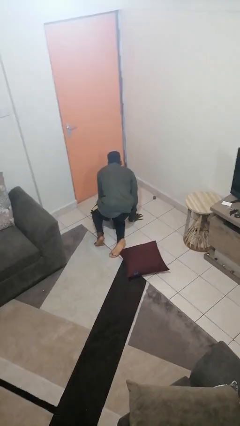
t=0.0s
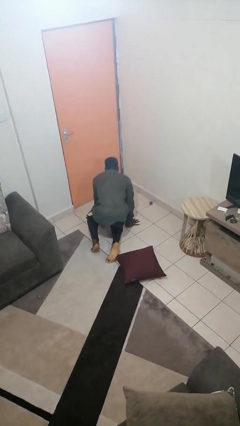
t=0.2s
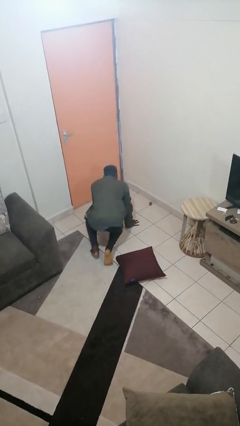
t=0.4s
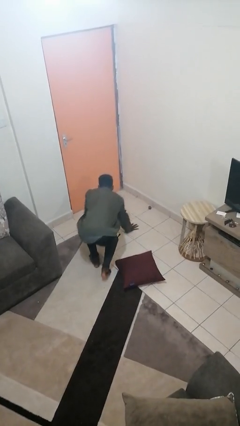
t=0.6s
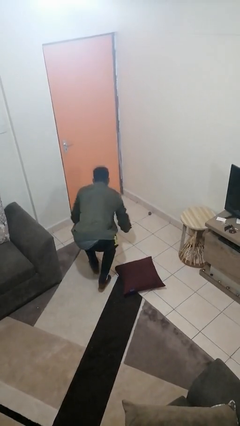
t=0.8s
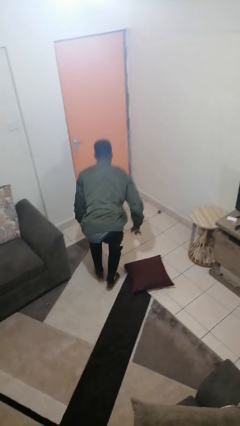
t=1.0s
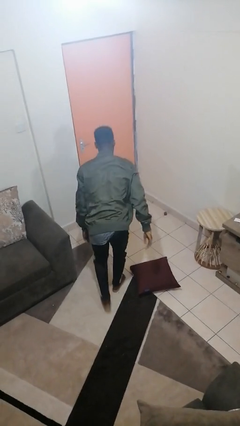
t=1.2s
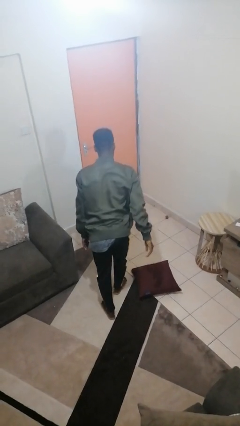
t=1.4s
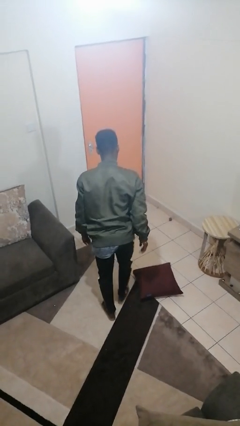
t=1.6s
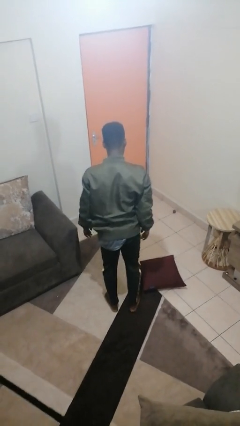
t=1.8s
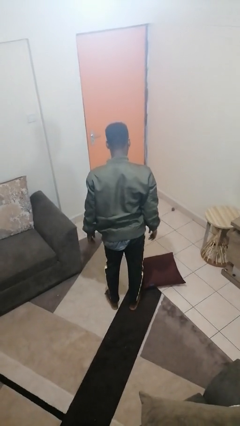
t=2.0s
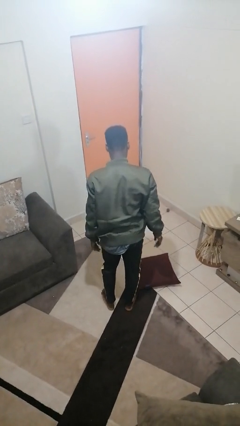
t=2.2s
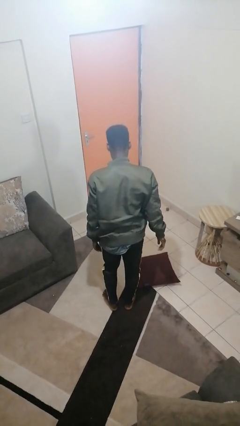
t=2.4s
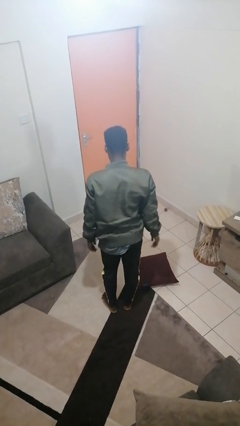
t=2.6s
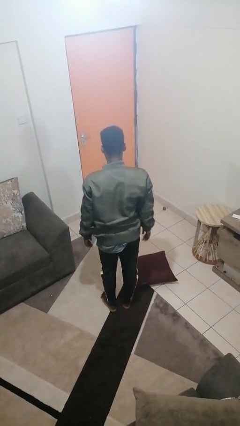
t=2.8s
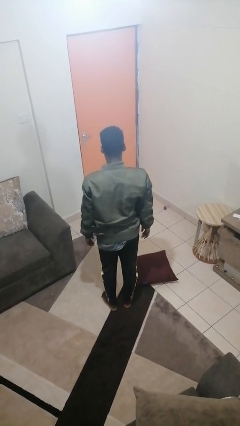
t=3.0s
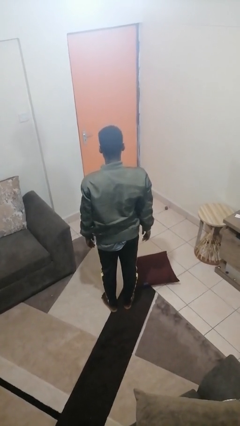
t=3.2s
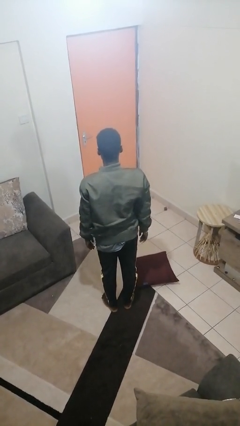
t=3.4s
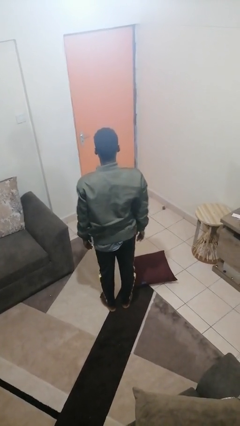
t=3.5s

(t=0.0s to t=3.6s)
person stands up from floor

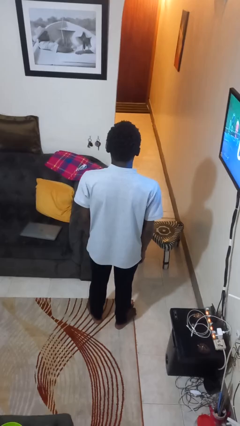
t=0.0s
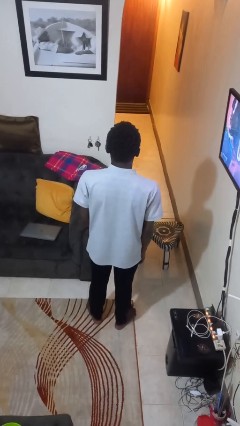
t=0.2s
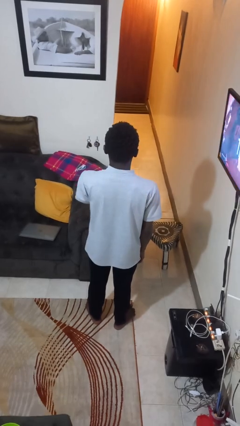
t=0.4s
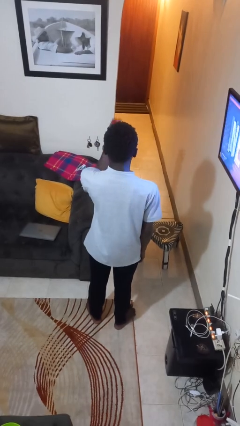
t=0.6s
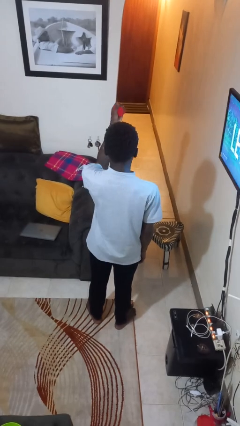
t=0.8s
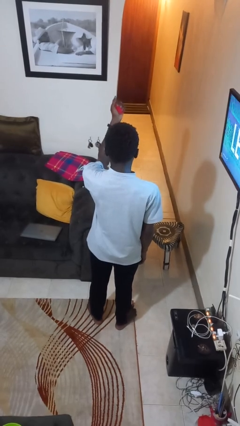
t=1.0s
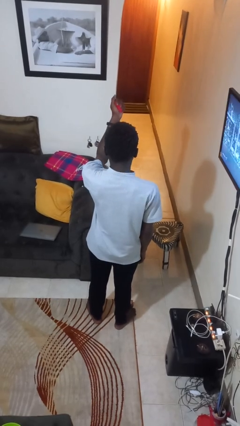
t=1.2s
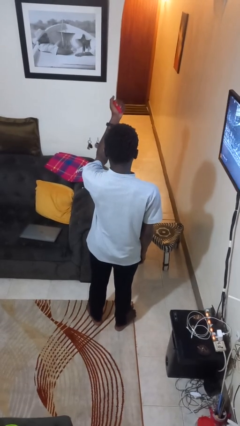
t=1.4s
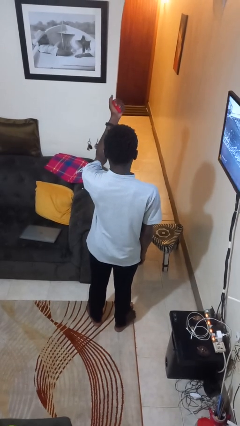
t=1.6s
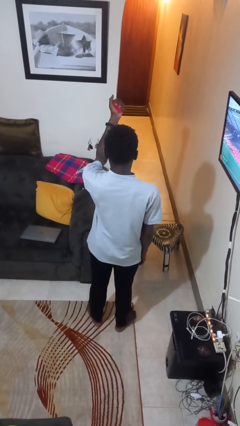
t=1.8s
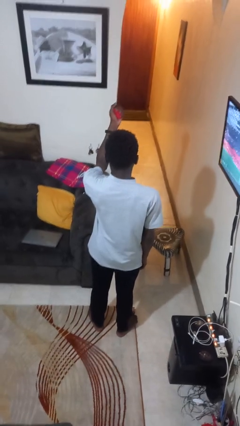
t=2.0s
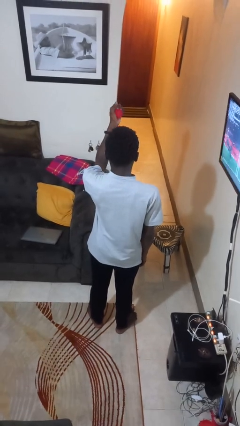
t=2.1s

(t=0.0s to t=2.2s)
person squeezes object

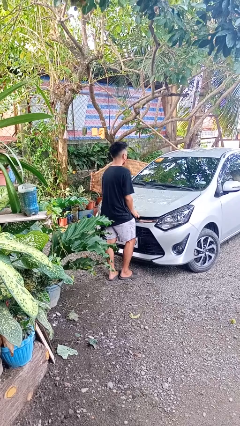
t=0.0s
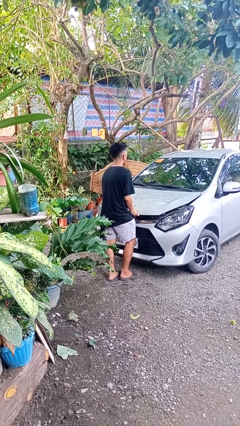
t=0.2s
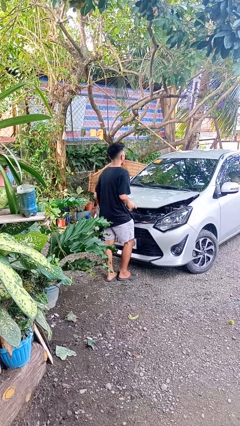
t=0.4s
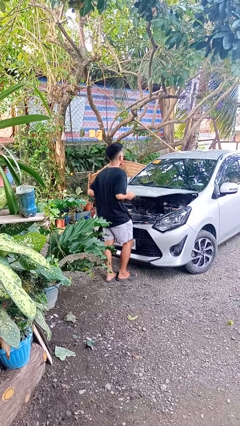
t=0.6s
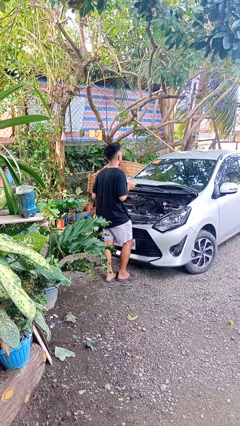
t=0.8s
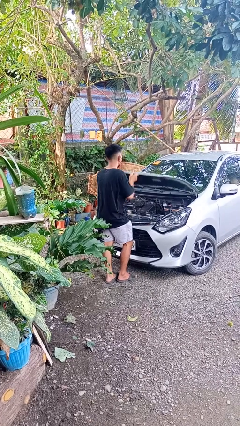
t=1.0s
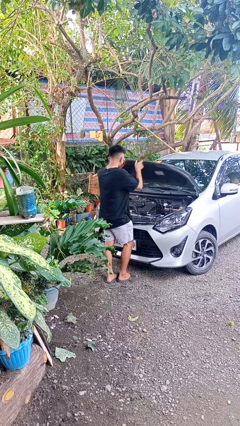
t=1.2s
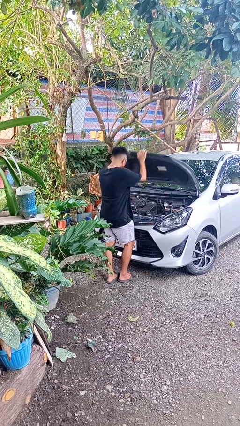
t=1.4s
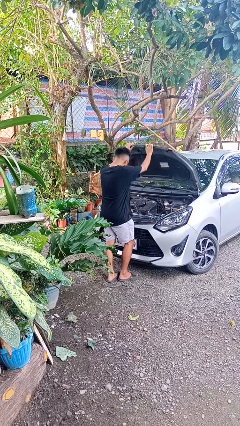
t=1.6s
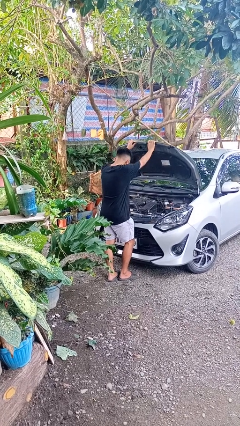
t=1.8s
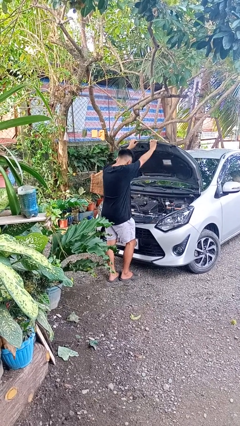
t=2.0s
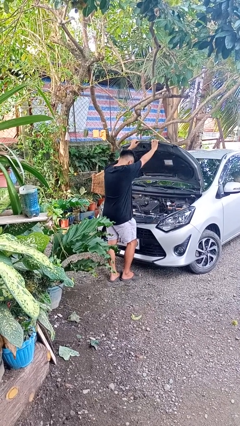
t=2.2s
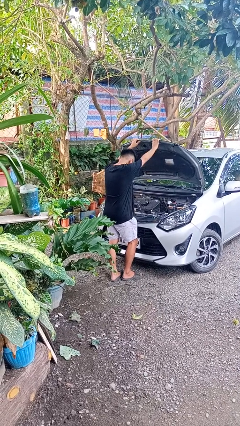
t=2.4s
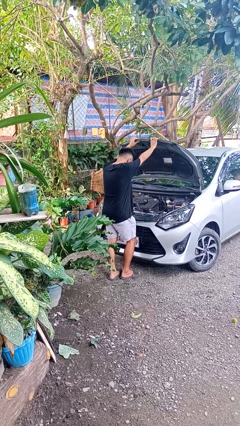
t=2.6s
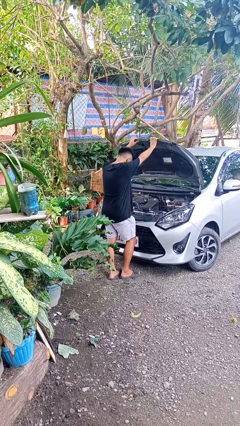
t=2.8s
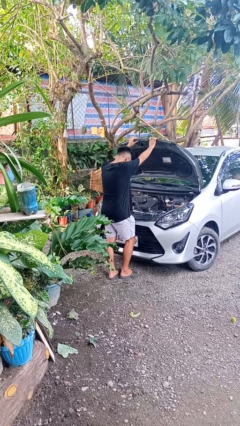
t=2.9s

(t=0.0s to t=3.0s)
person opens car hood

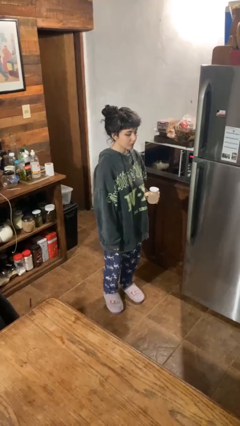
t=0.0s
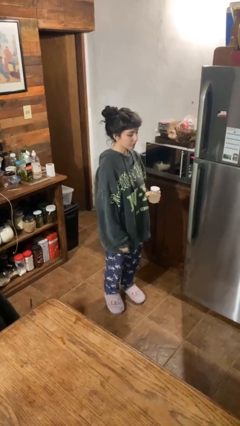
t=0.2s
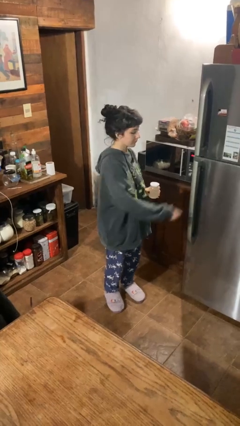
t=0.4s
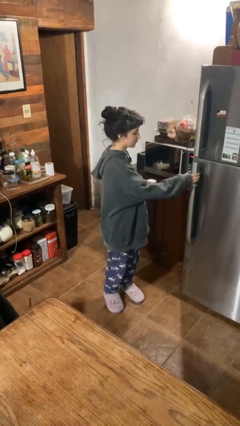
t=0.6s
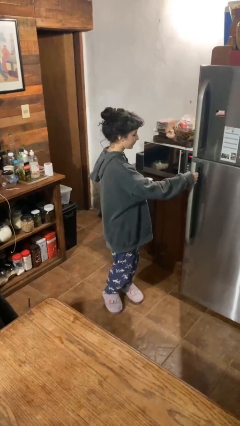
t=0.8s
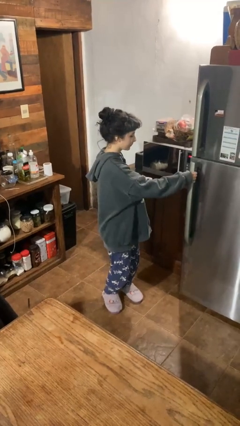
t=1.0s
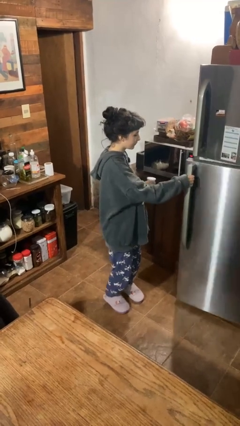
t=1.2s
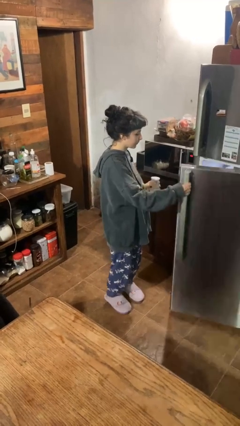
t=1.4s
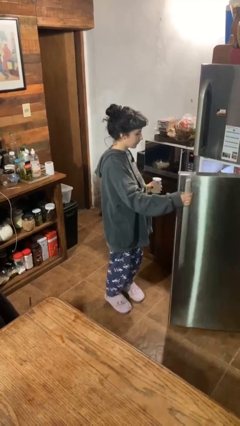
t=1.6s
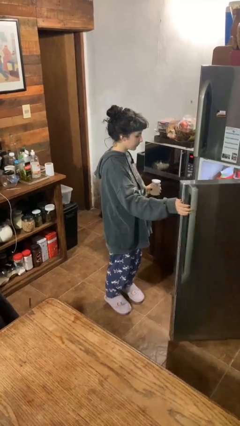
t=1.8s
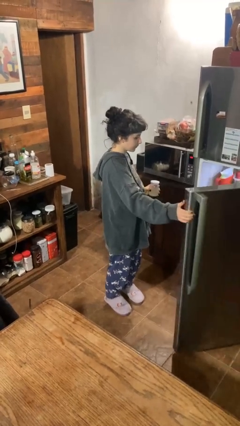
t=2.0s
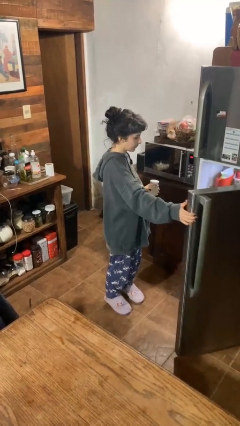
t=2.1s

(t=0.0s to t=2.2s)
person opens refrigerator

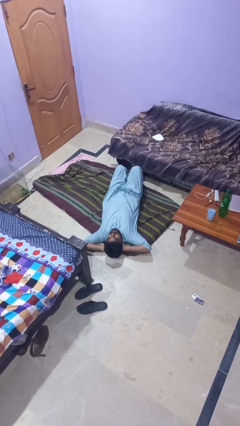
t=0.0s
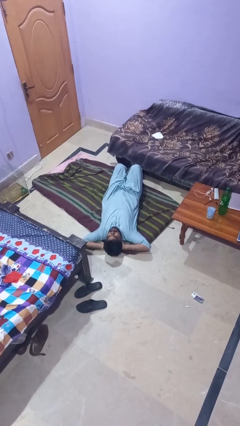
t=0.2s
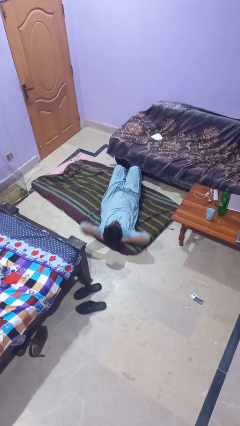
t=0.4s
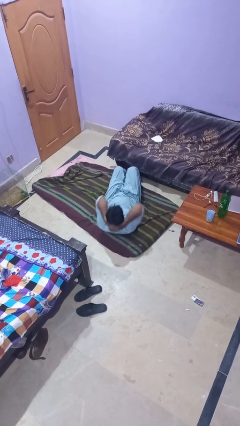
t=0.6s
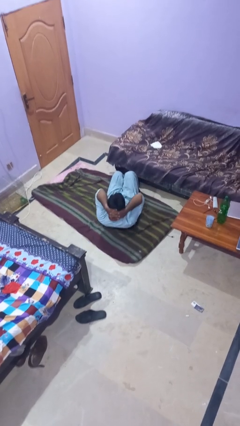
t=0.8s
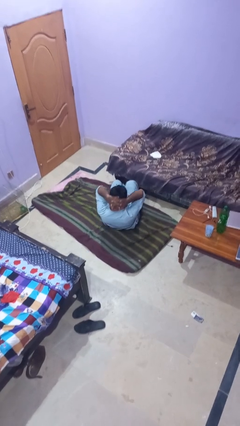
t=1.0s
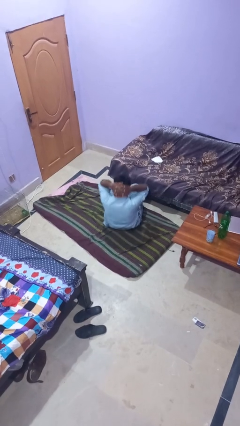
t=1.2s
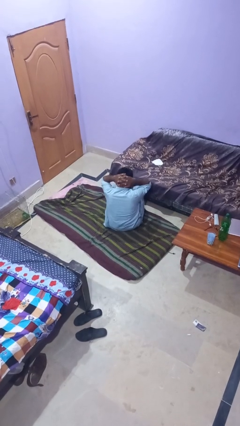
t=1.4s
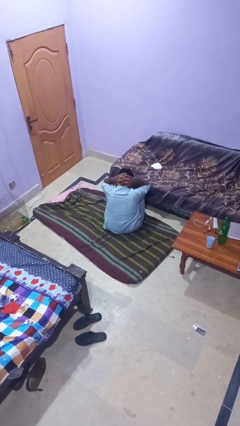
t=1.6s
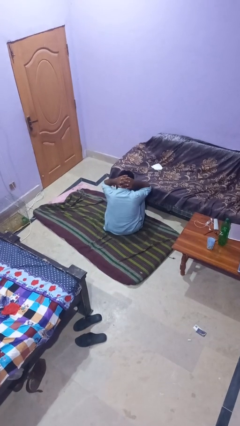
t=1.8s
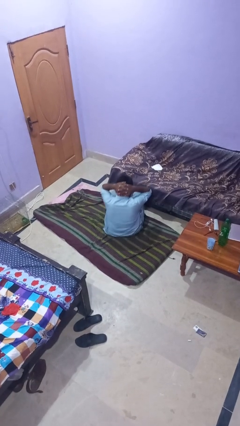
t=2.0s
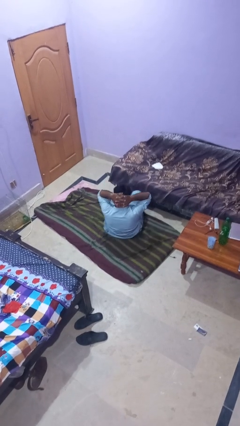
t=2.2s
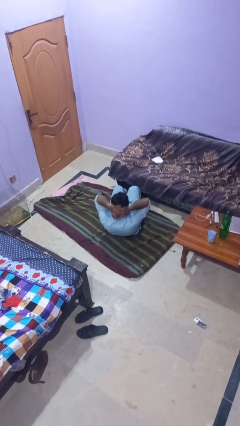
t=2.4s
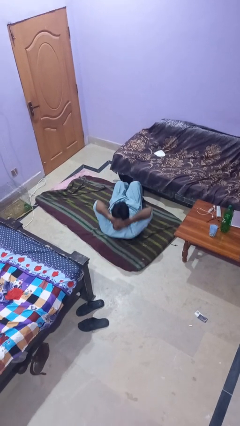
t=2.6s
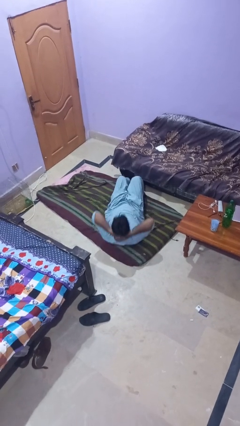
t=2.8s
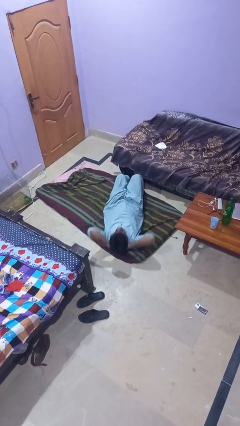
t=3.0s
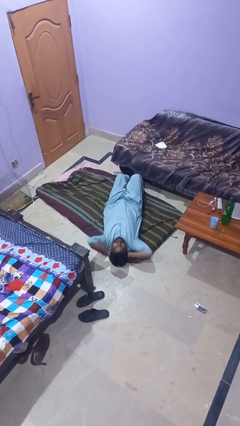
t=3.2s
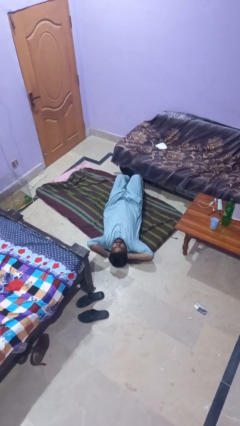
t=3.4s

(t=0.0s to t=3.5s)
person exercises with situp

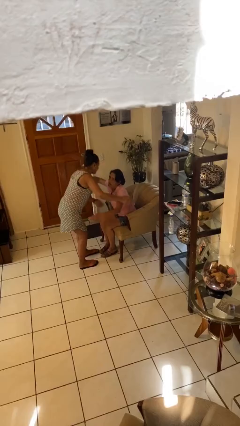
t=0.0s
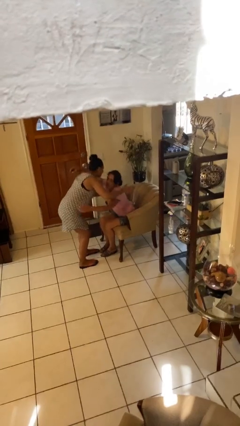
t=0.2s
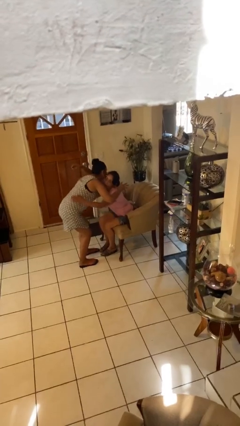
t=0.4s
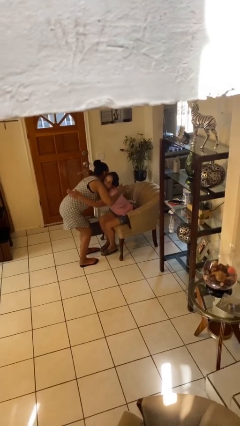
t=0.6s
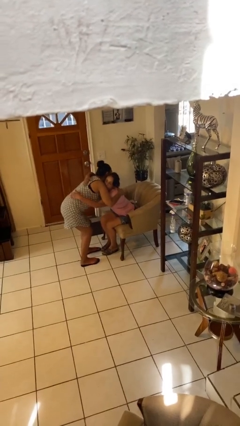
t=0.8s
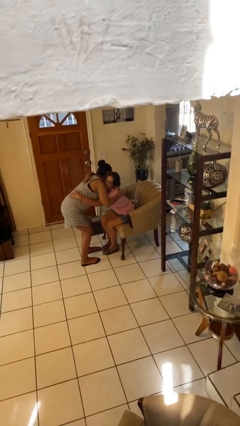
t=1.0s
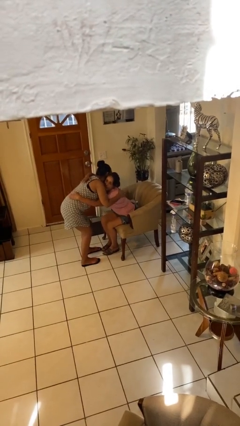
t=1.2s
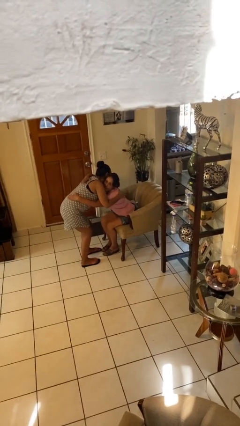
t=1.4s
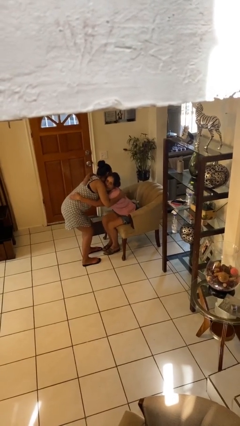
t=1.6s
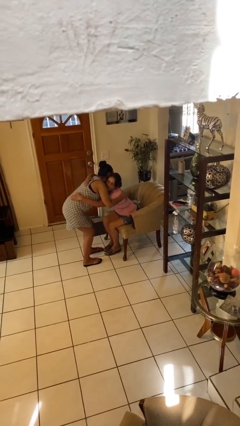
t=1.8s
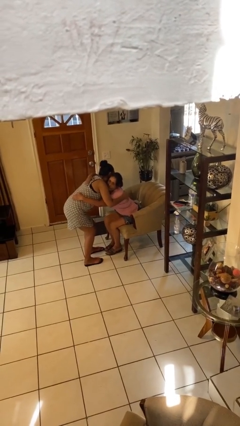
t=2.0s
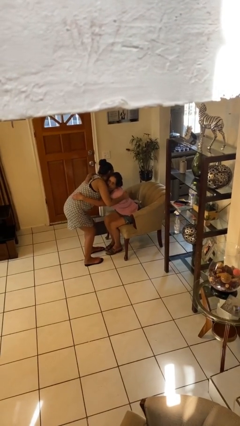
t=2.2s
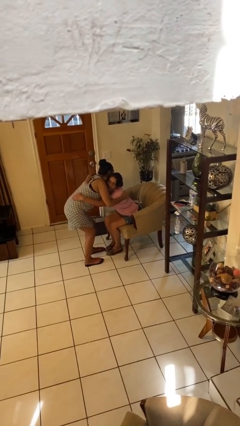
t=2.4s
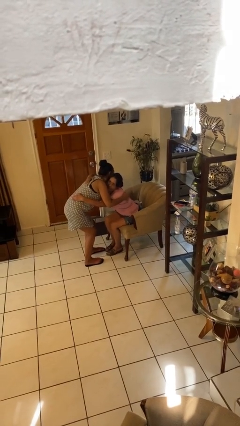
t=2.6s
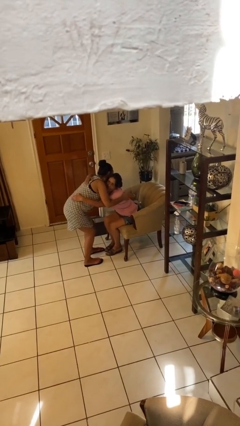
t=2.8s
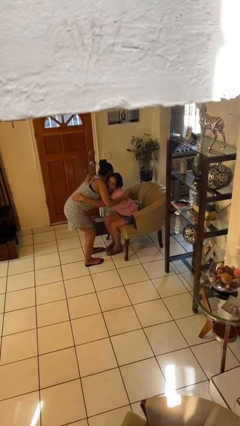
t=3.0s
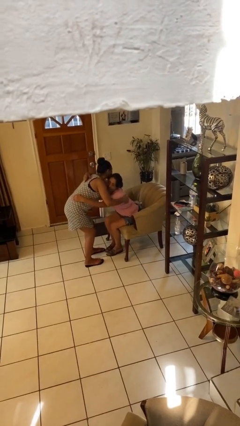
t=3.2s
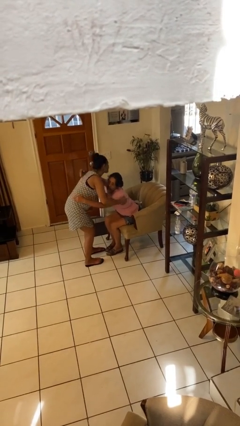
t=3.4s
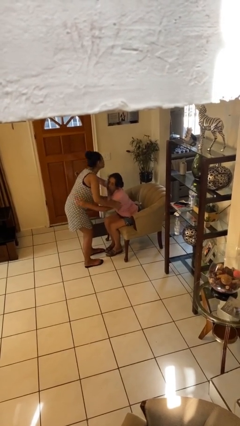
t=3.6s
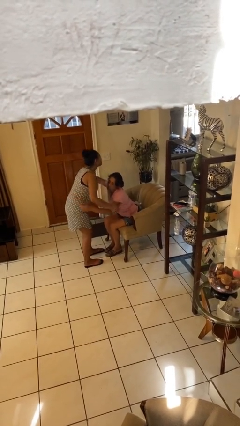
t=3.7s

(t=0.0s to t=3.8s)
person embraces person
